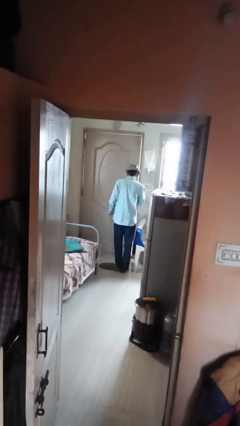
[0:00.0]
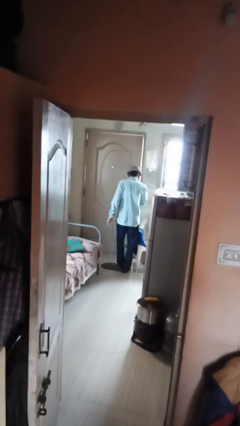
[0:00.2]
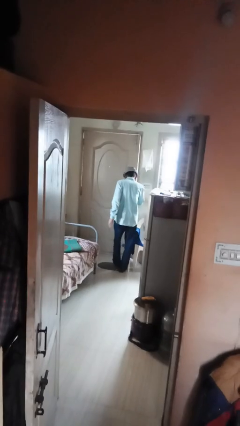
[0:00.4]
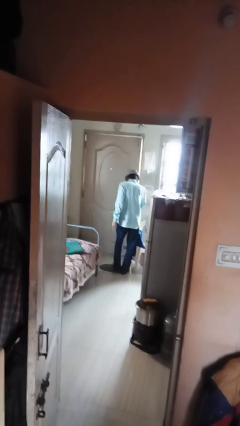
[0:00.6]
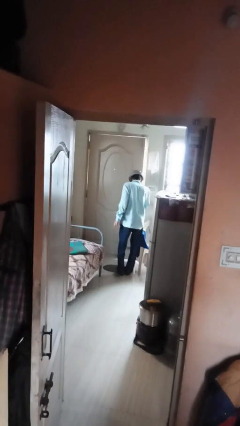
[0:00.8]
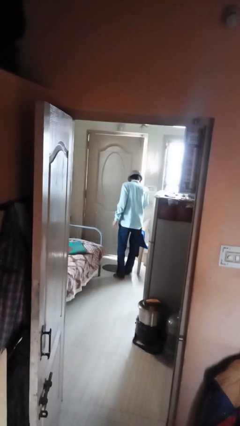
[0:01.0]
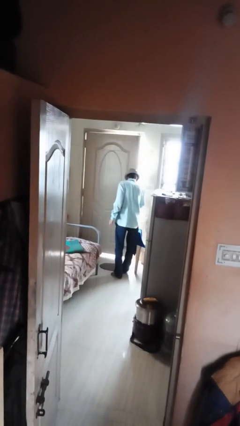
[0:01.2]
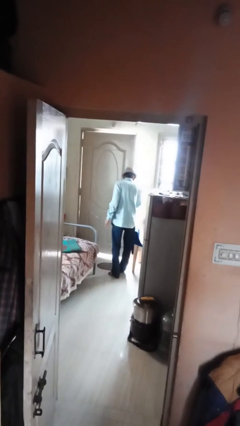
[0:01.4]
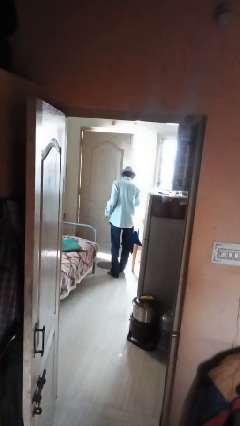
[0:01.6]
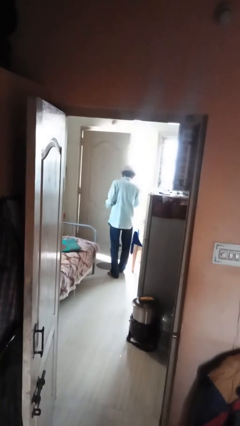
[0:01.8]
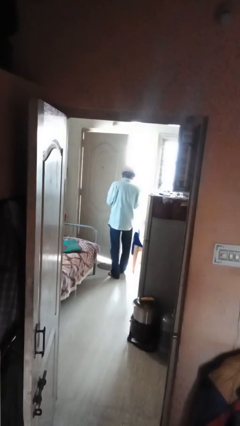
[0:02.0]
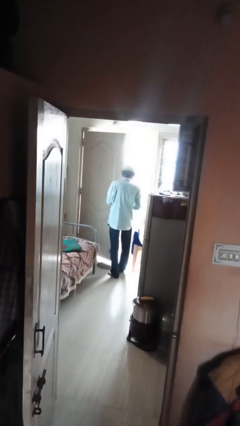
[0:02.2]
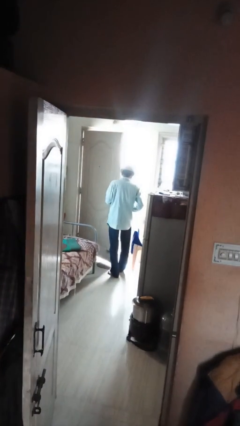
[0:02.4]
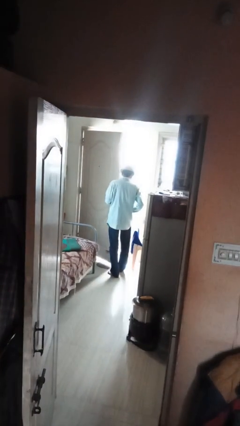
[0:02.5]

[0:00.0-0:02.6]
person closes facility door

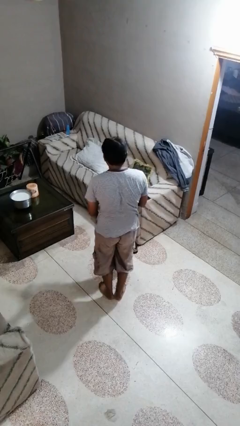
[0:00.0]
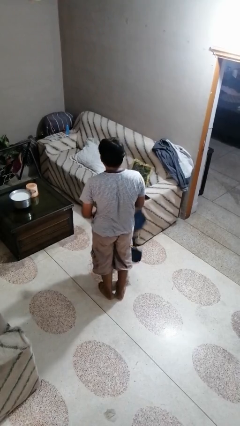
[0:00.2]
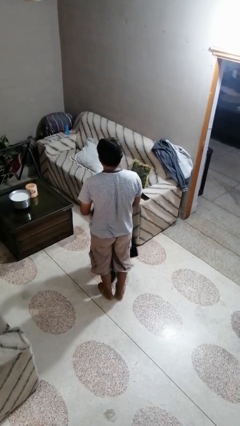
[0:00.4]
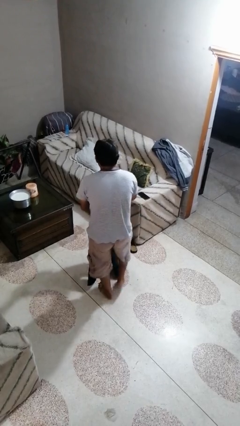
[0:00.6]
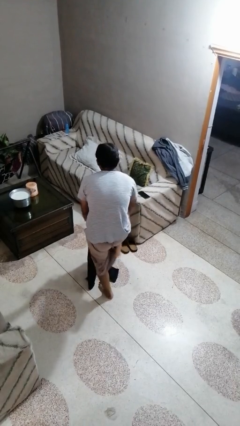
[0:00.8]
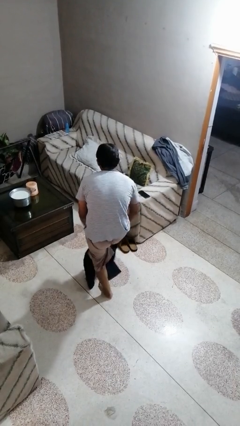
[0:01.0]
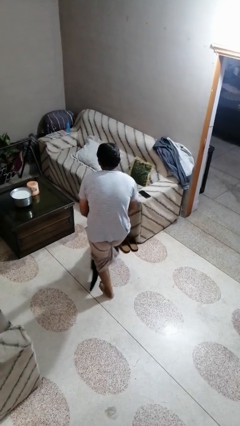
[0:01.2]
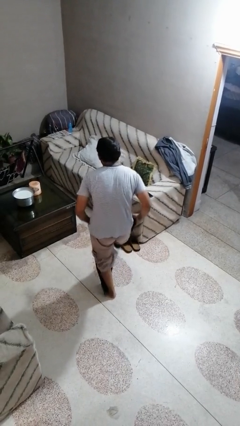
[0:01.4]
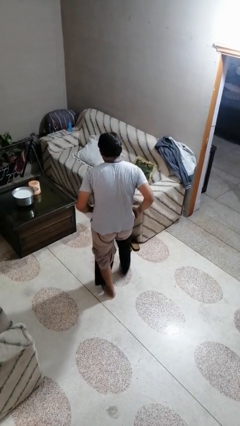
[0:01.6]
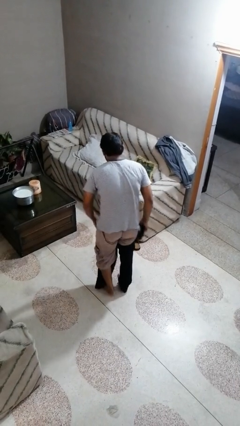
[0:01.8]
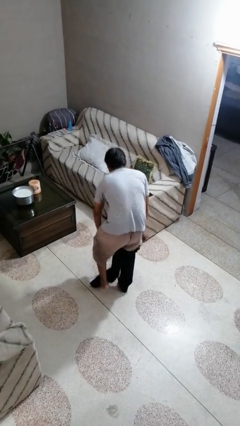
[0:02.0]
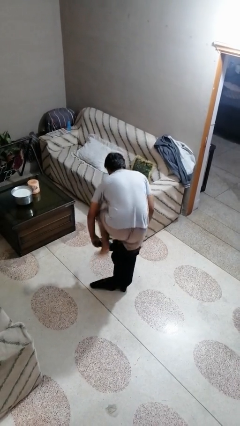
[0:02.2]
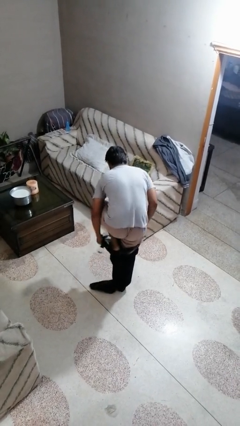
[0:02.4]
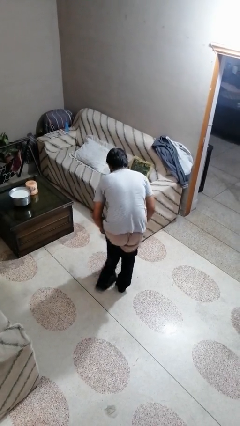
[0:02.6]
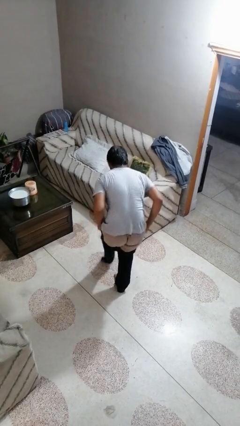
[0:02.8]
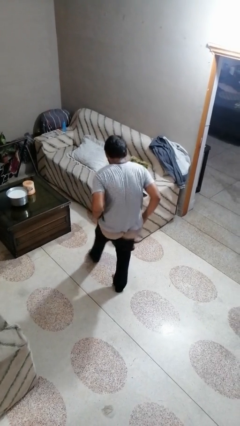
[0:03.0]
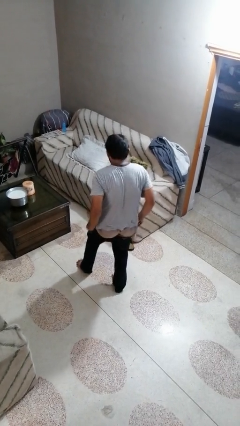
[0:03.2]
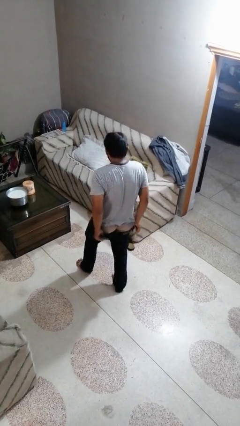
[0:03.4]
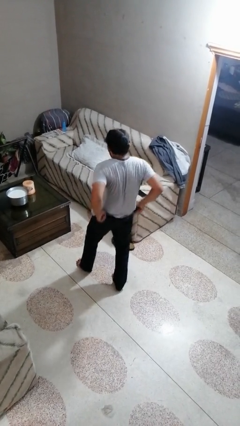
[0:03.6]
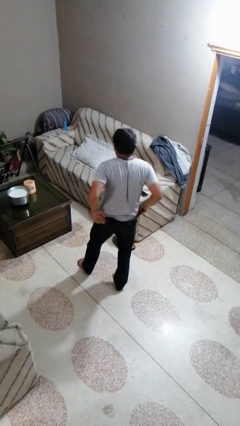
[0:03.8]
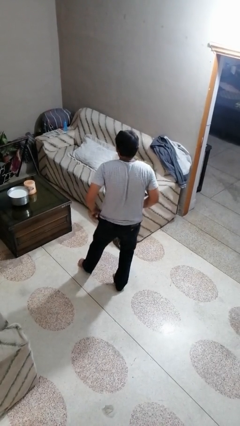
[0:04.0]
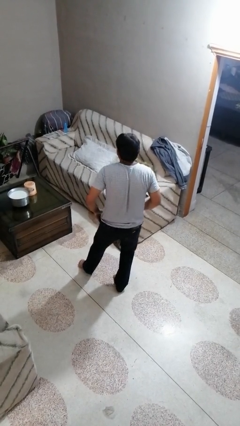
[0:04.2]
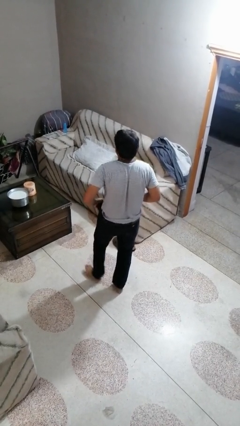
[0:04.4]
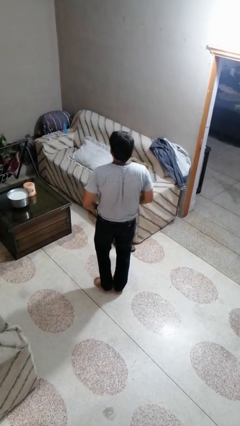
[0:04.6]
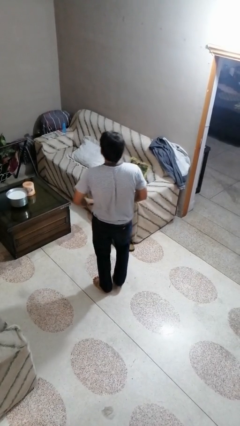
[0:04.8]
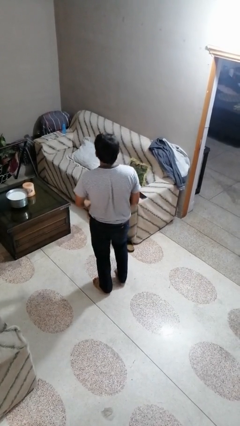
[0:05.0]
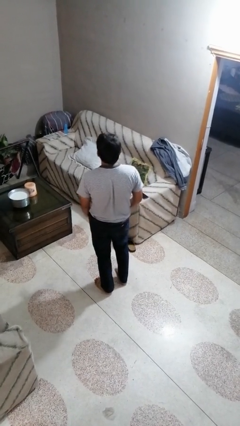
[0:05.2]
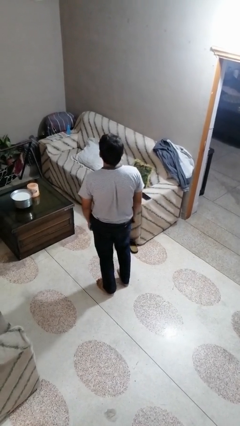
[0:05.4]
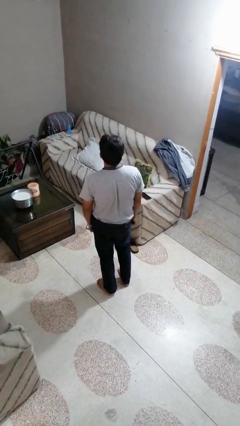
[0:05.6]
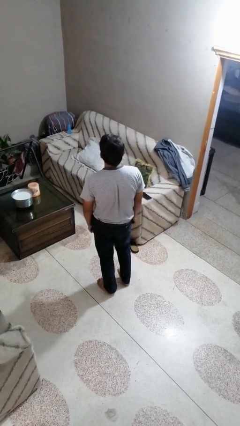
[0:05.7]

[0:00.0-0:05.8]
person puts on pants

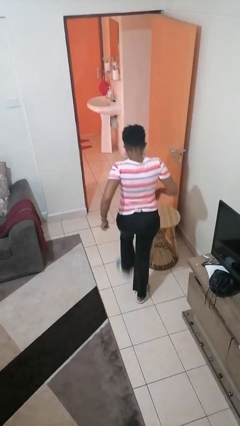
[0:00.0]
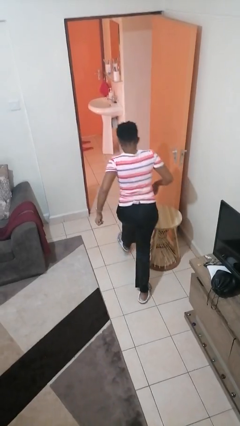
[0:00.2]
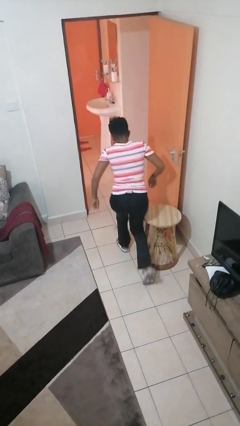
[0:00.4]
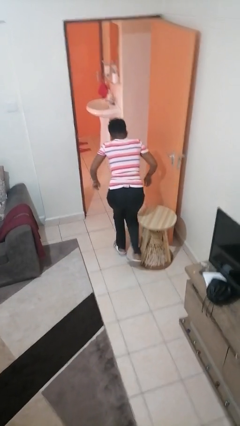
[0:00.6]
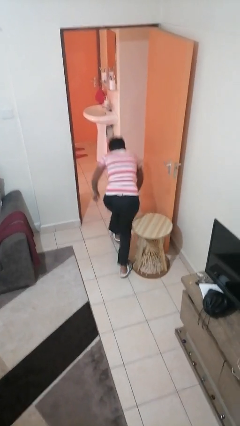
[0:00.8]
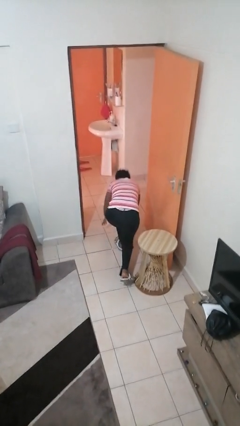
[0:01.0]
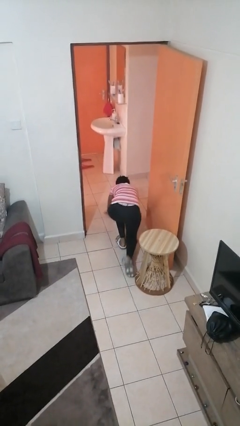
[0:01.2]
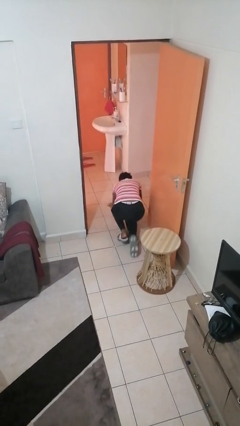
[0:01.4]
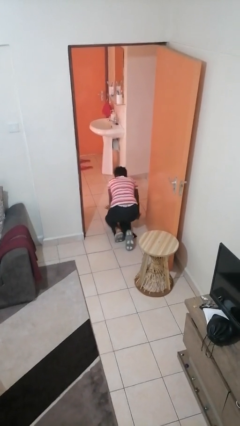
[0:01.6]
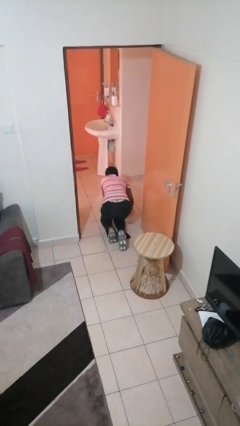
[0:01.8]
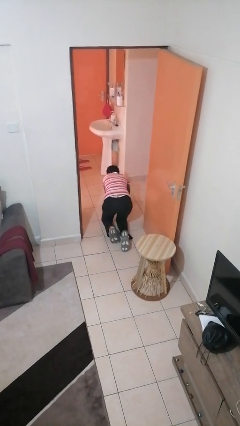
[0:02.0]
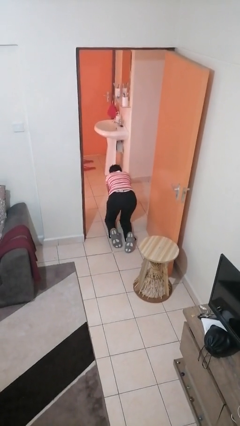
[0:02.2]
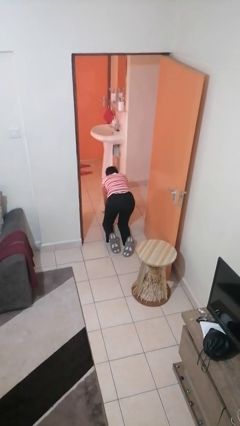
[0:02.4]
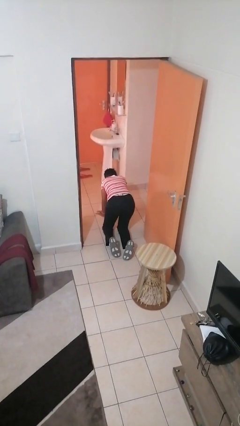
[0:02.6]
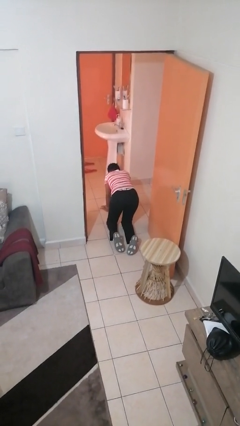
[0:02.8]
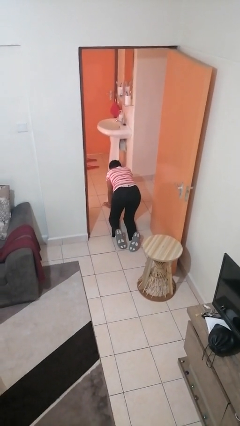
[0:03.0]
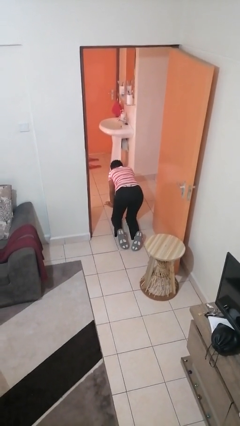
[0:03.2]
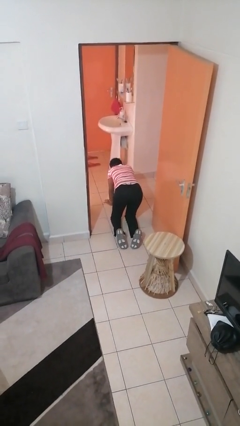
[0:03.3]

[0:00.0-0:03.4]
person trips on object on floor

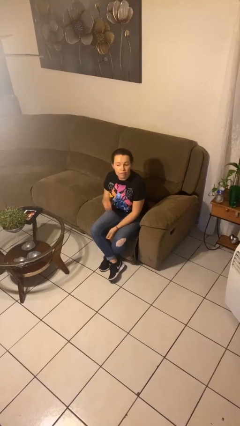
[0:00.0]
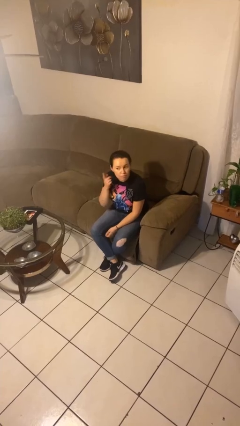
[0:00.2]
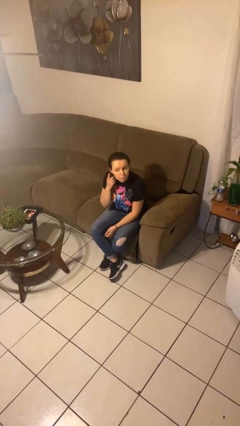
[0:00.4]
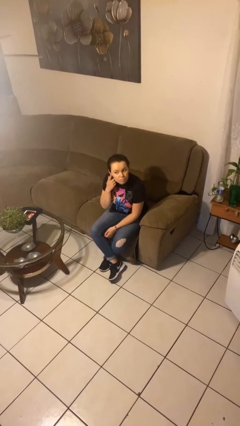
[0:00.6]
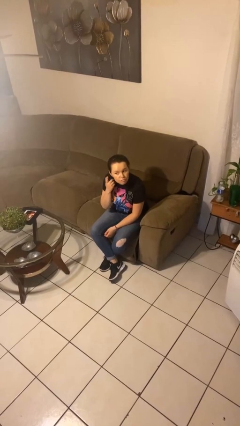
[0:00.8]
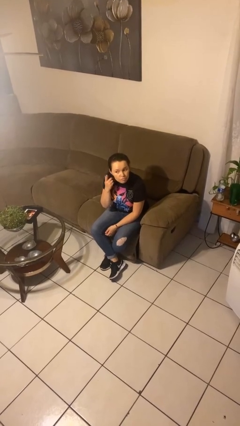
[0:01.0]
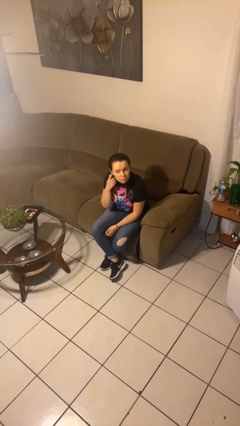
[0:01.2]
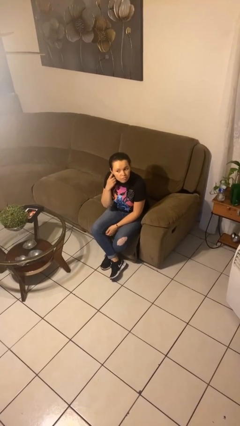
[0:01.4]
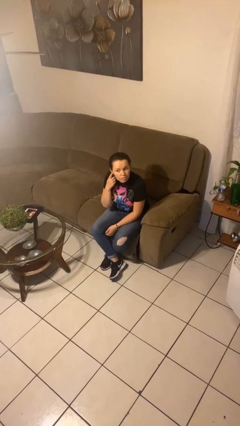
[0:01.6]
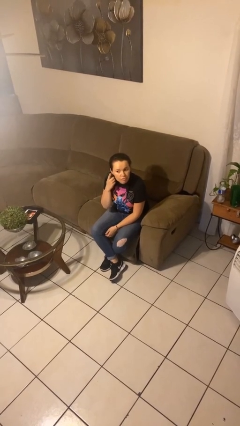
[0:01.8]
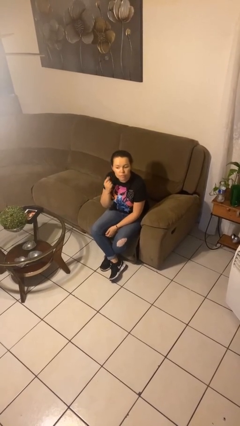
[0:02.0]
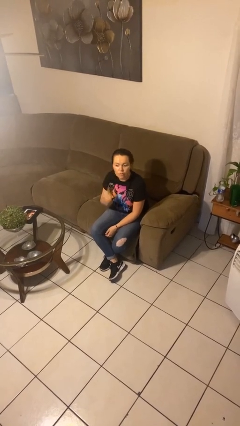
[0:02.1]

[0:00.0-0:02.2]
person gestures listen closely

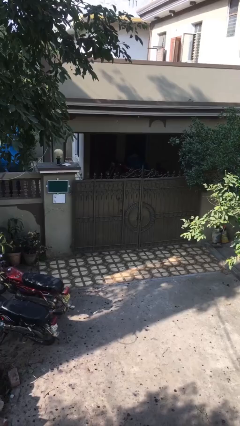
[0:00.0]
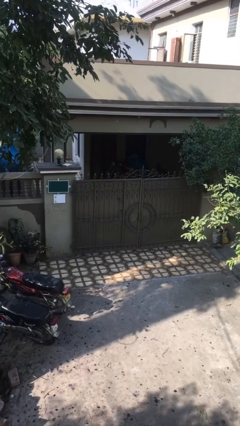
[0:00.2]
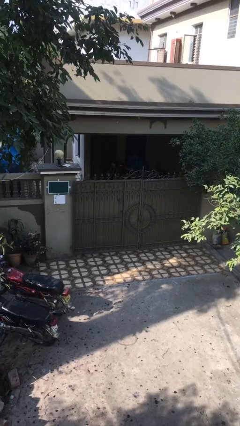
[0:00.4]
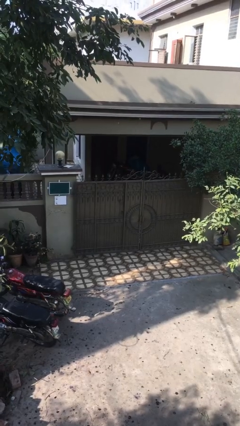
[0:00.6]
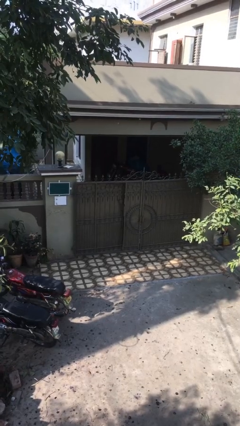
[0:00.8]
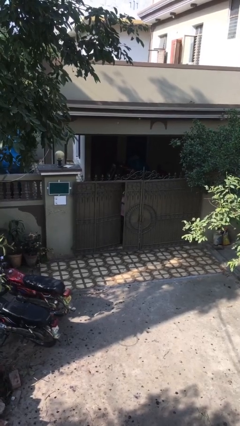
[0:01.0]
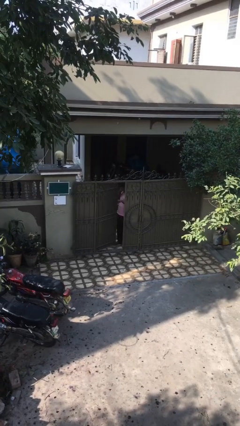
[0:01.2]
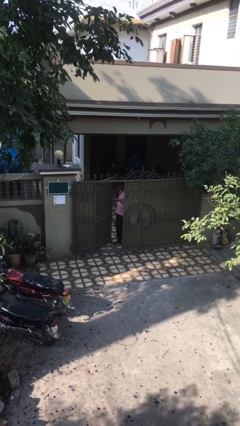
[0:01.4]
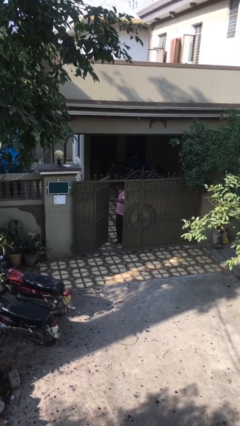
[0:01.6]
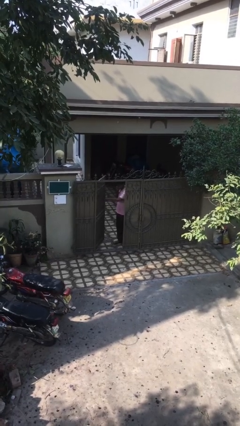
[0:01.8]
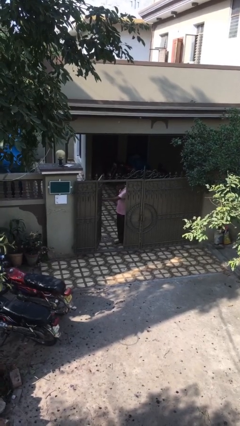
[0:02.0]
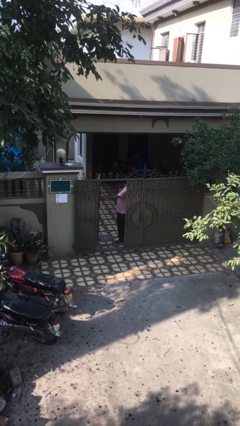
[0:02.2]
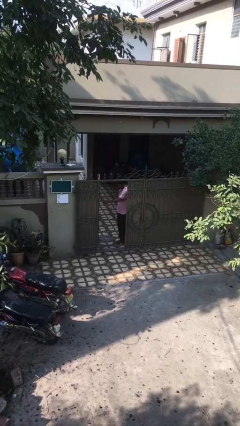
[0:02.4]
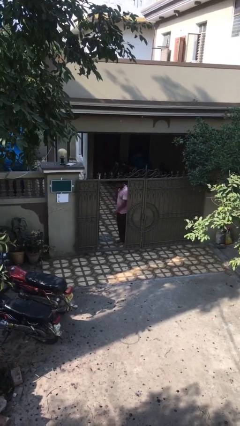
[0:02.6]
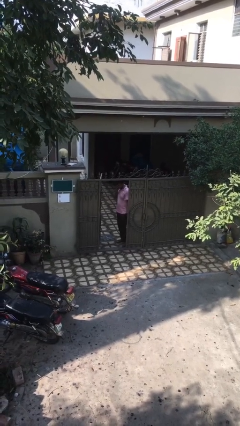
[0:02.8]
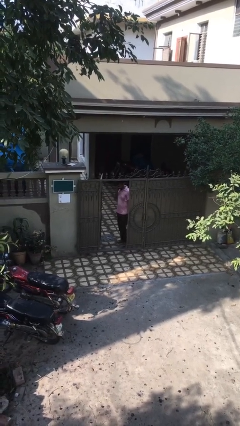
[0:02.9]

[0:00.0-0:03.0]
person opens facility door

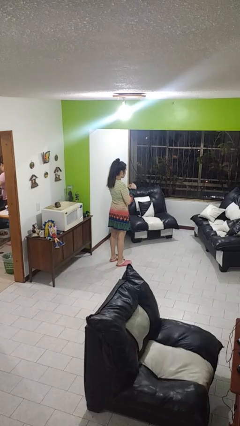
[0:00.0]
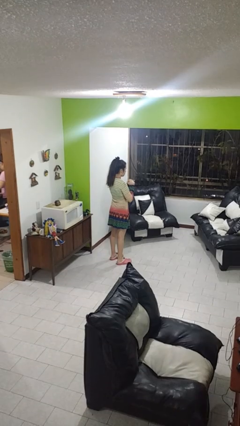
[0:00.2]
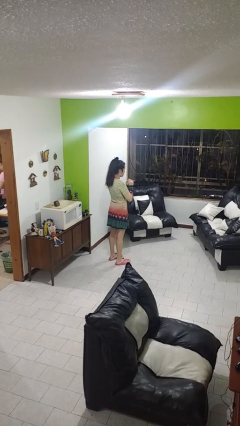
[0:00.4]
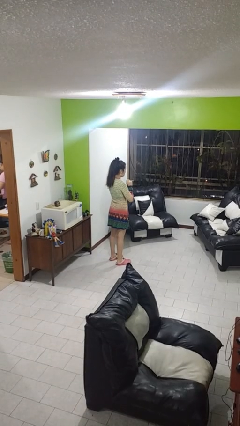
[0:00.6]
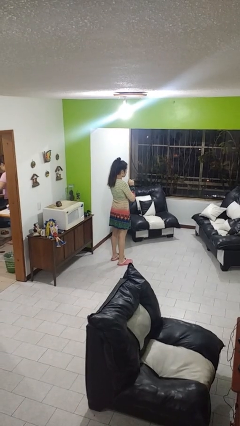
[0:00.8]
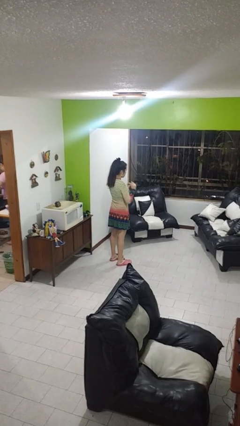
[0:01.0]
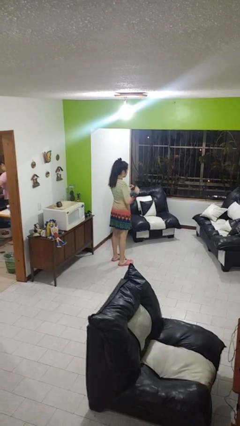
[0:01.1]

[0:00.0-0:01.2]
person files fingernails
